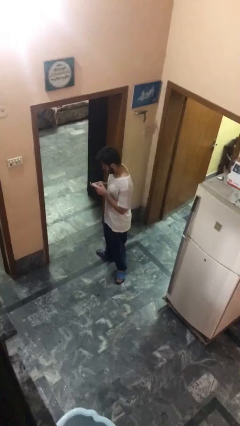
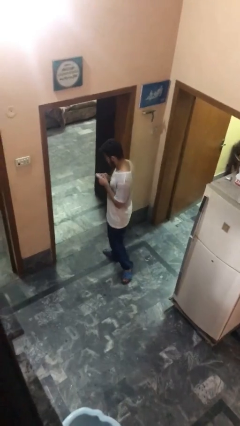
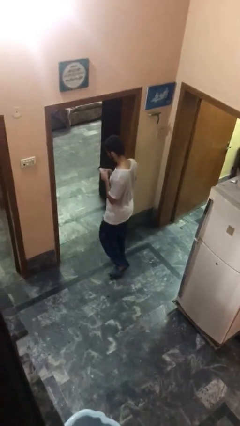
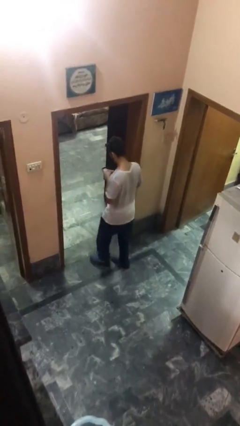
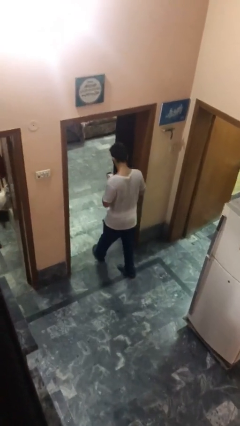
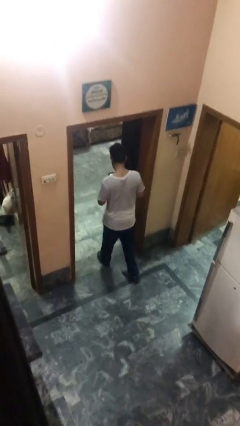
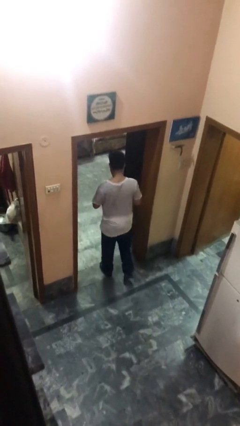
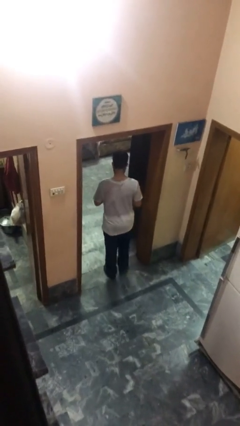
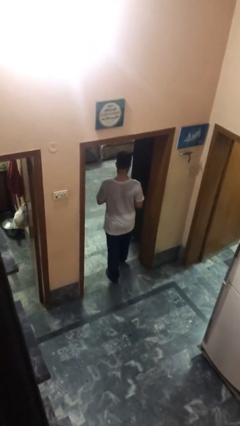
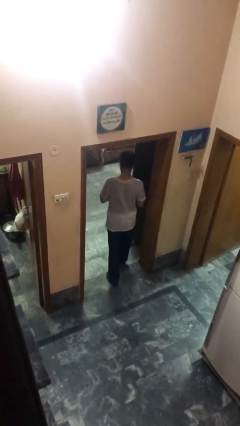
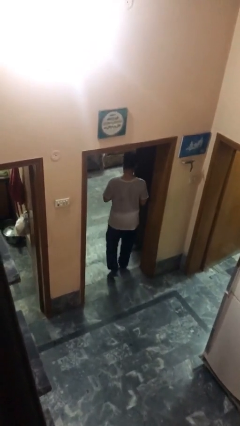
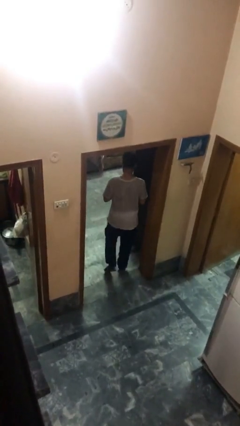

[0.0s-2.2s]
person exits scene through structure

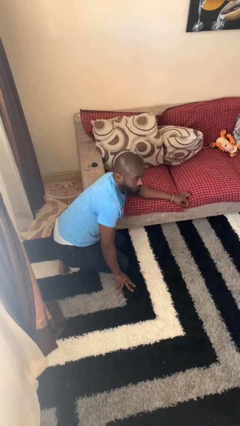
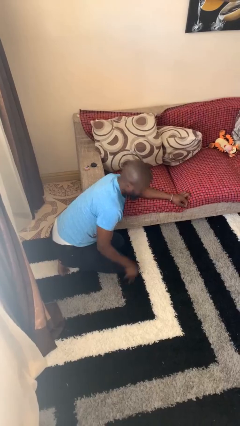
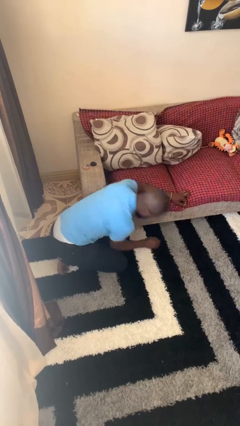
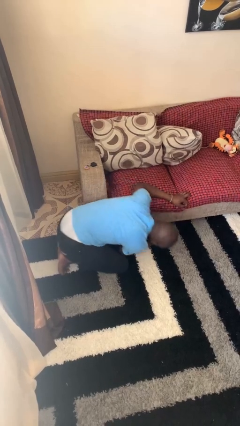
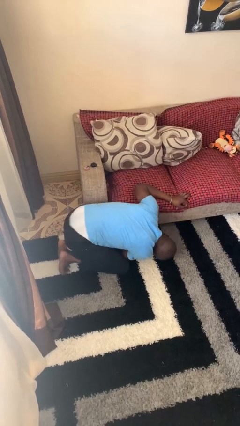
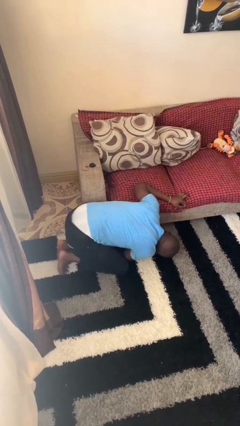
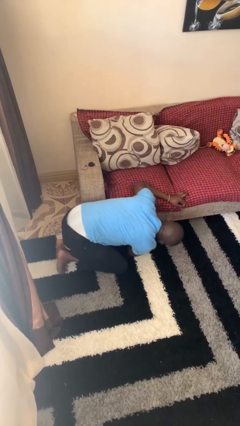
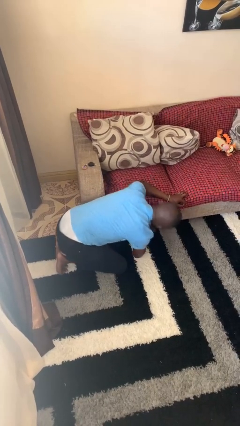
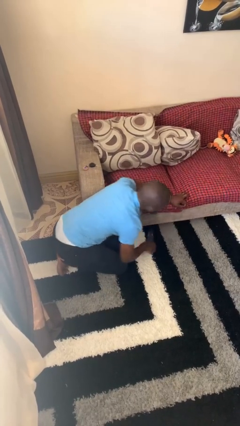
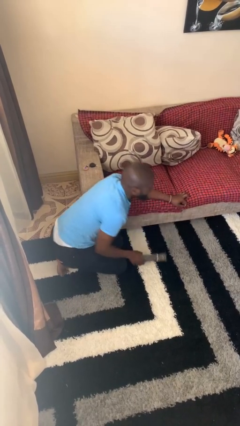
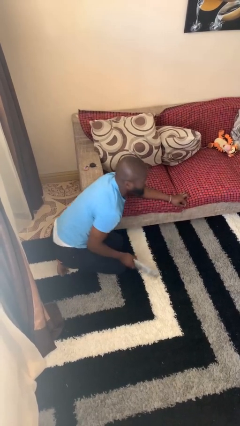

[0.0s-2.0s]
person searches under couch

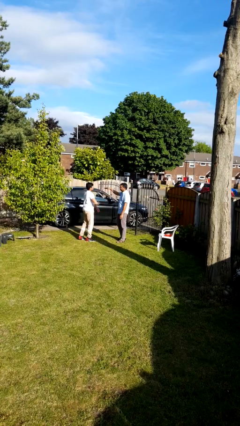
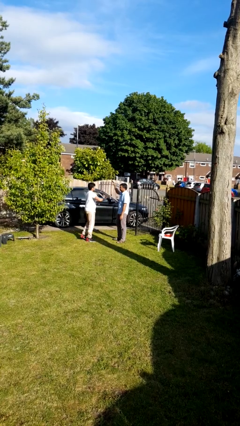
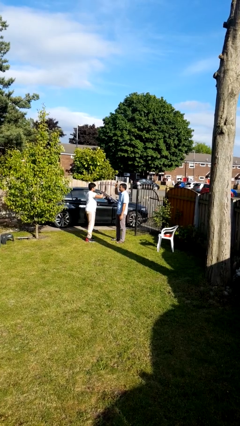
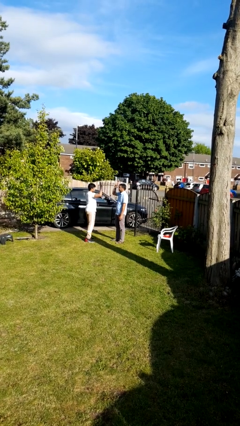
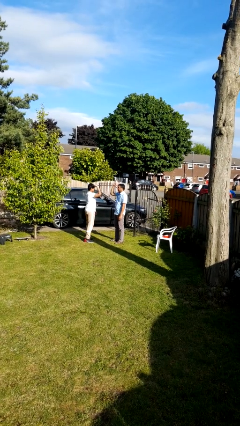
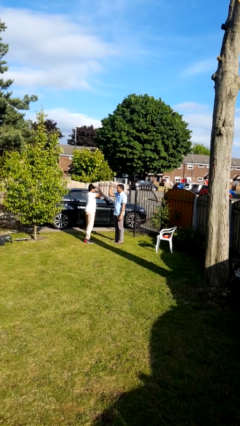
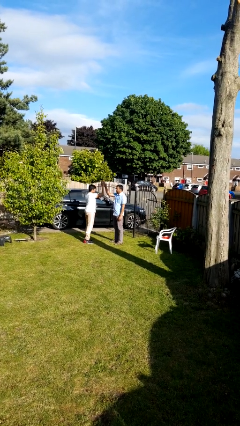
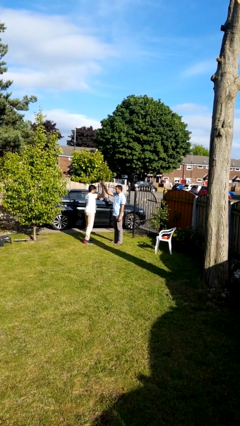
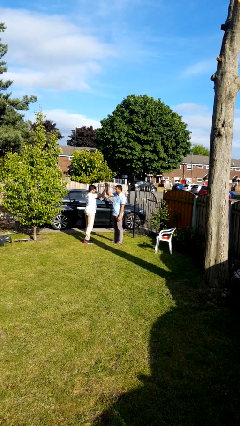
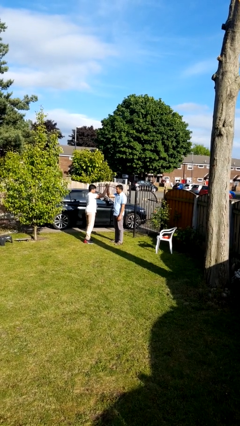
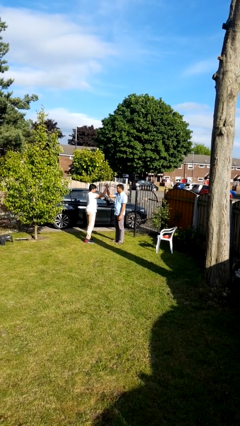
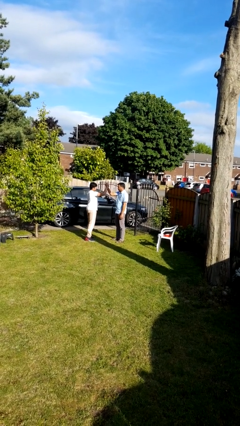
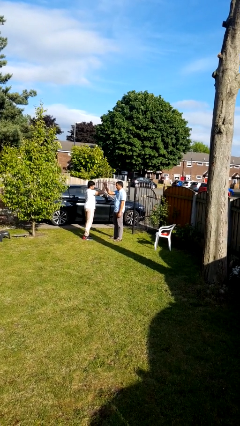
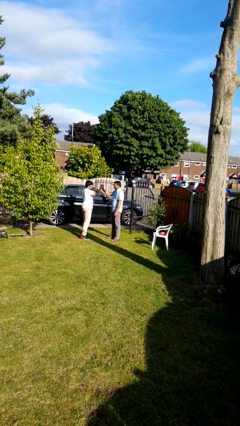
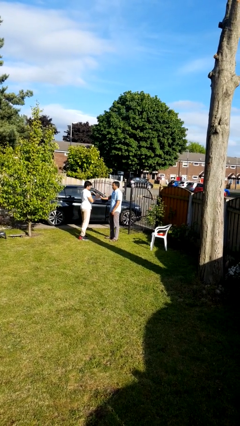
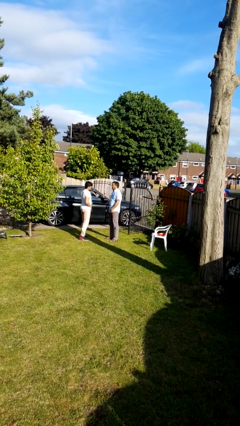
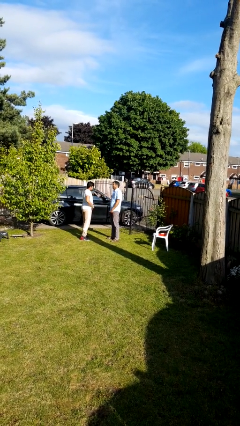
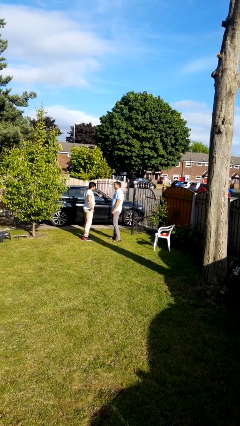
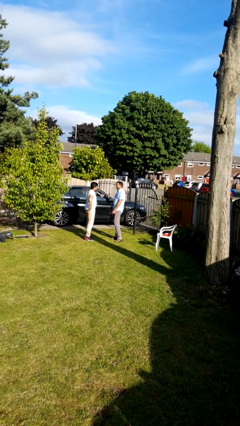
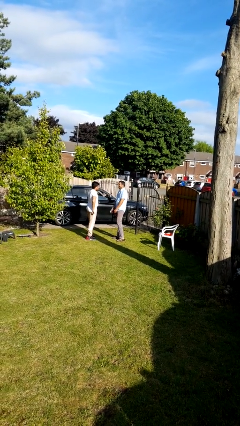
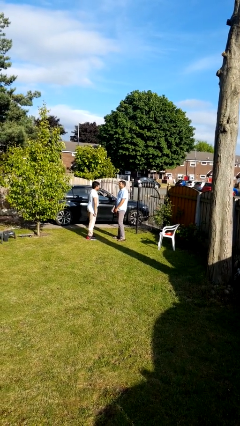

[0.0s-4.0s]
person highfives hand

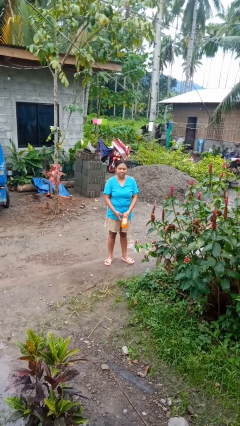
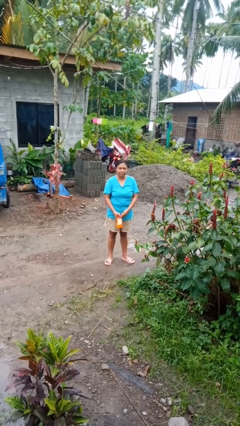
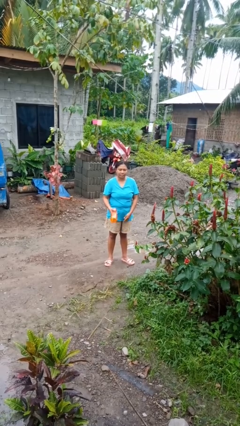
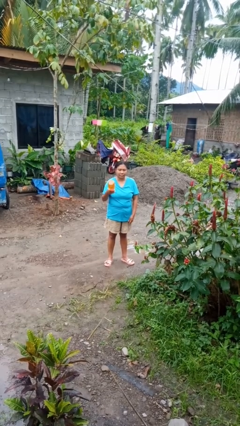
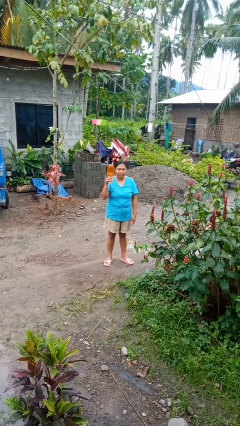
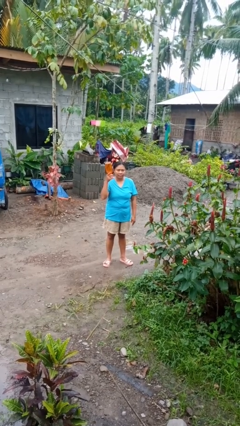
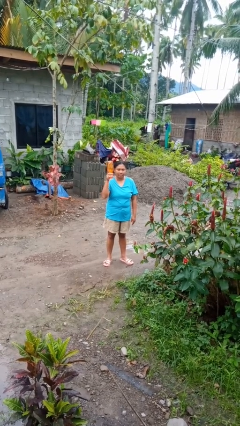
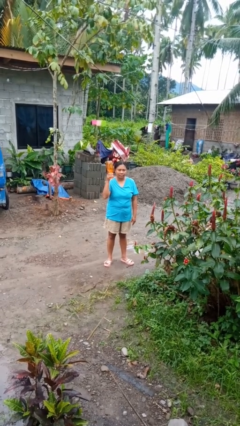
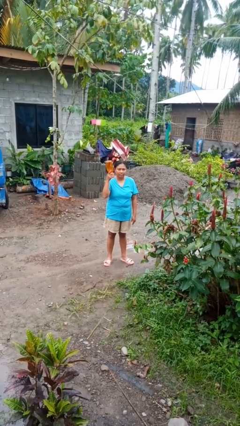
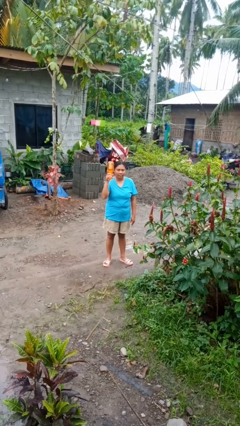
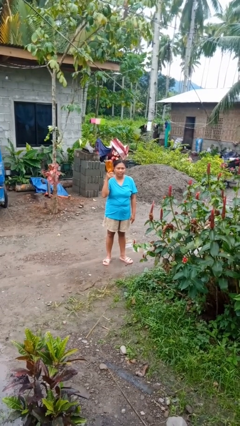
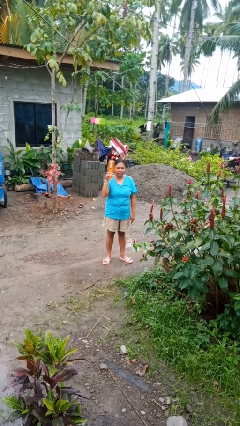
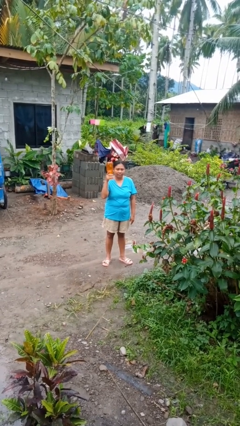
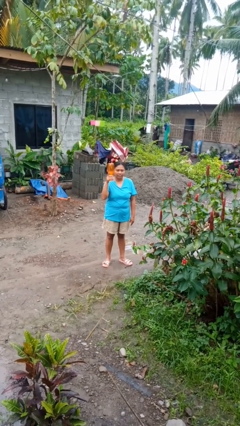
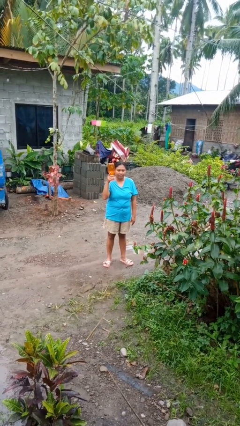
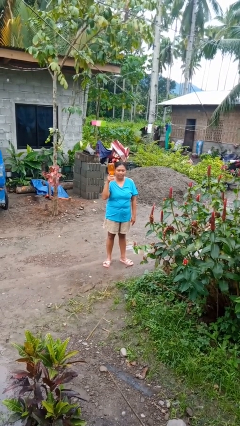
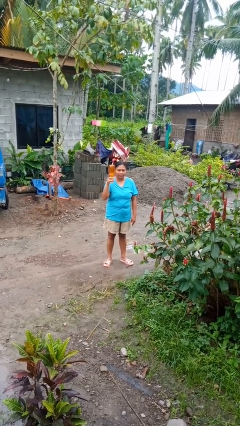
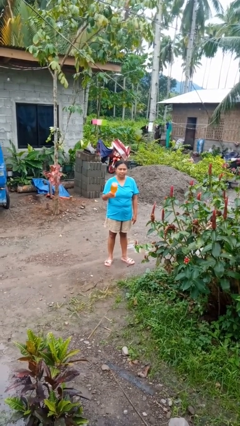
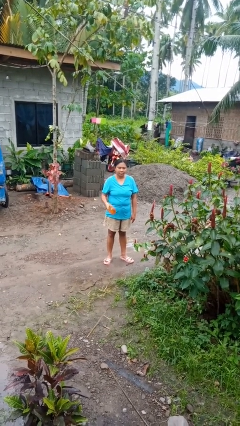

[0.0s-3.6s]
person holds object above head

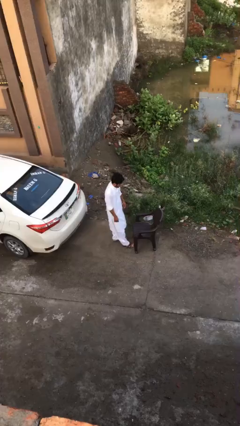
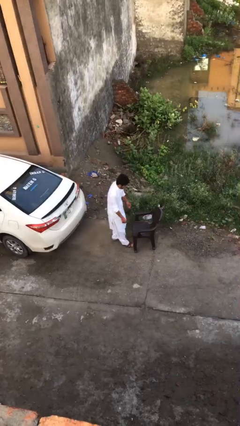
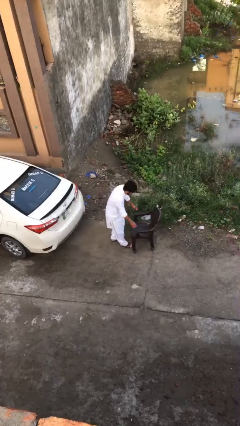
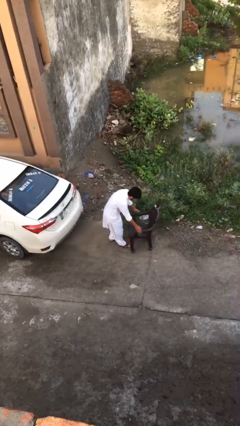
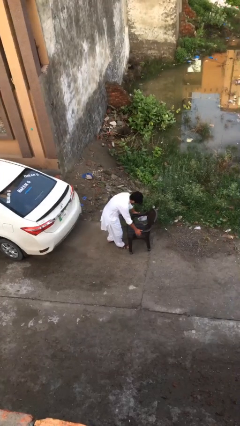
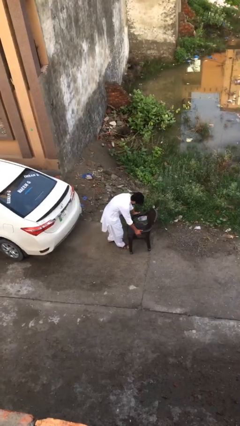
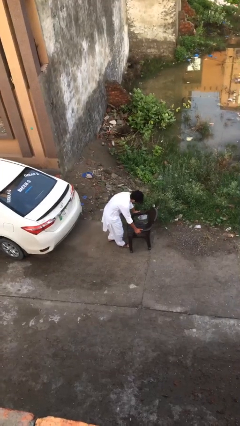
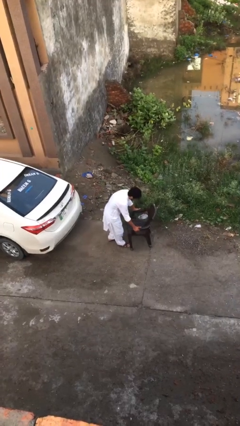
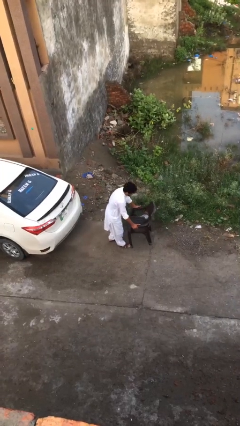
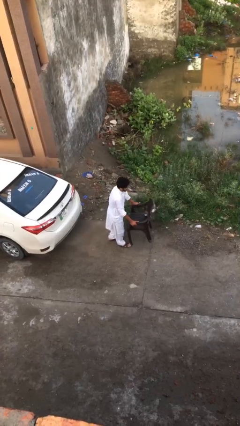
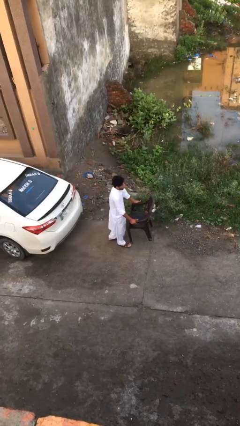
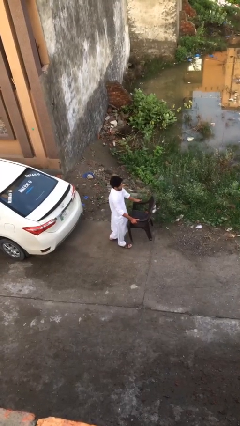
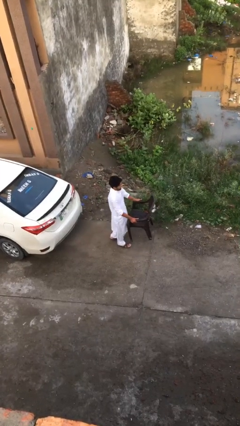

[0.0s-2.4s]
person picks up object from floor

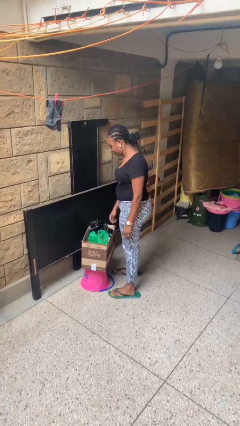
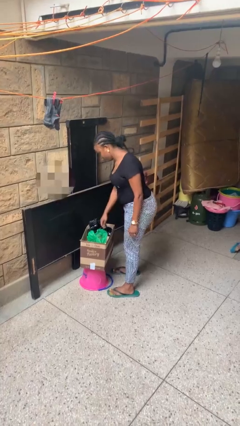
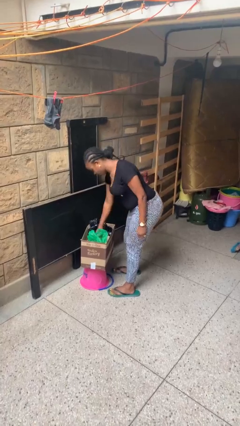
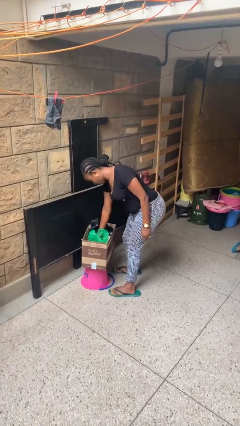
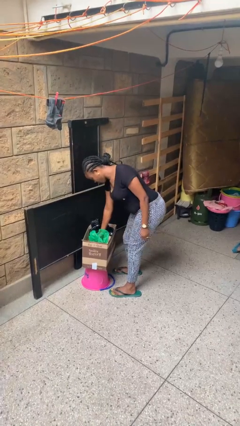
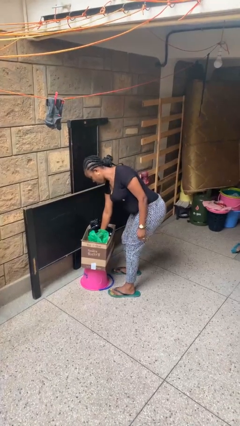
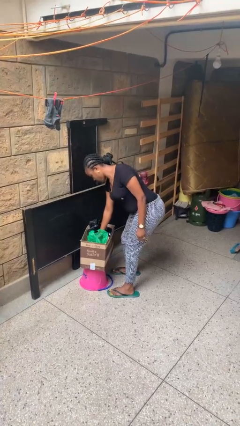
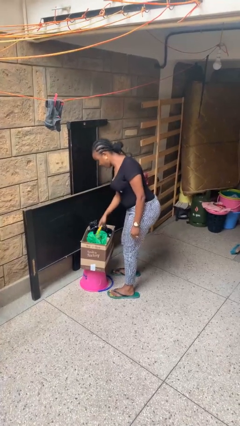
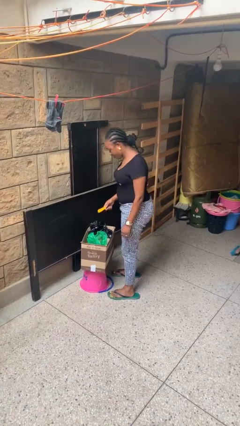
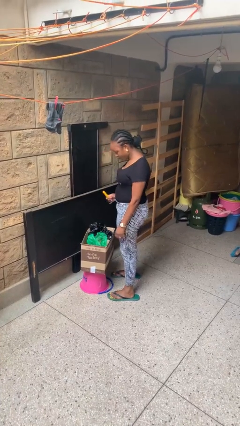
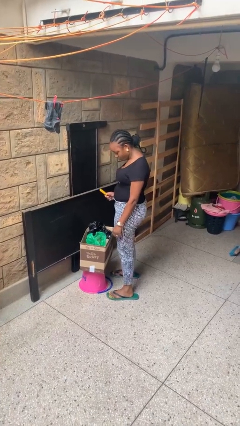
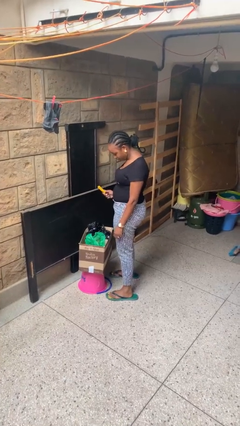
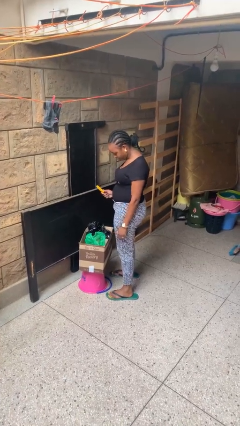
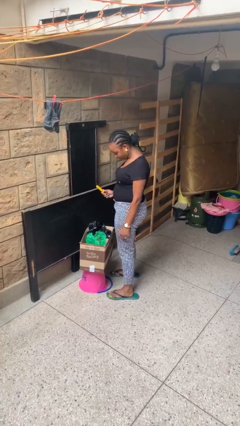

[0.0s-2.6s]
person takes object from box

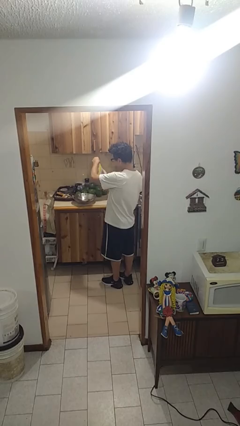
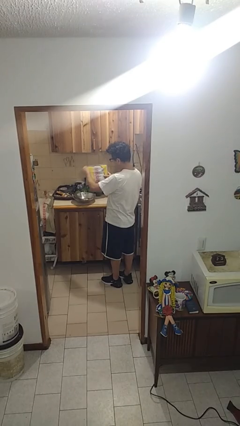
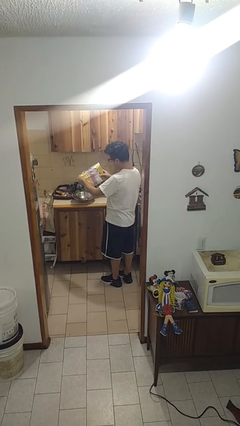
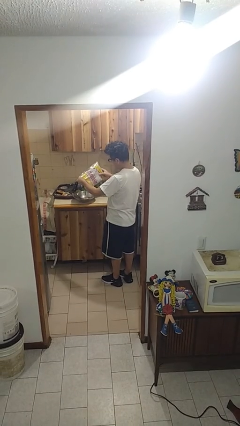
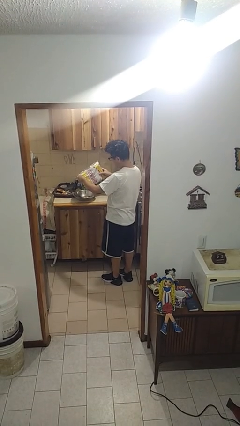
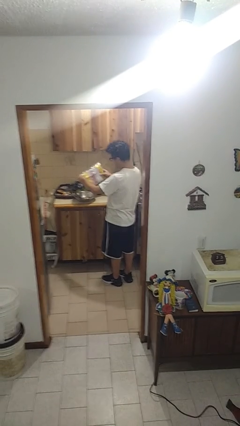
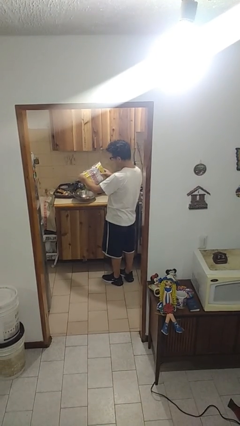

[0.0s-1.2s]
person pours into bowl
